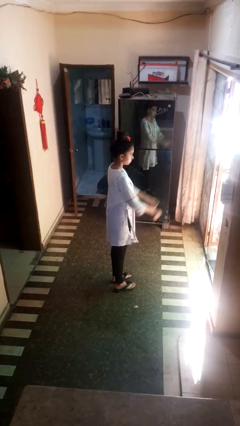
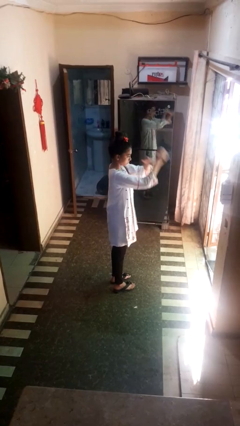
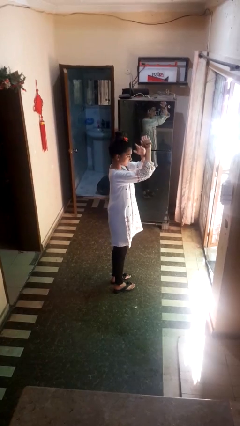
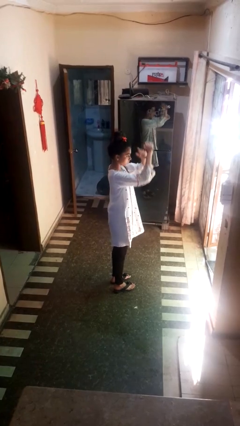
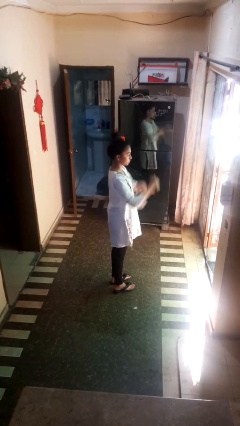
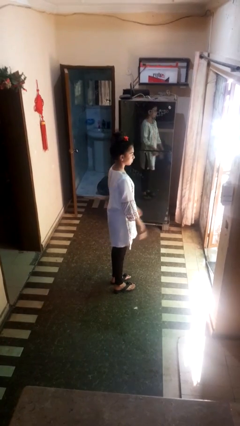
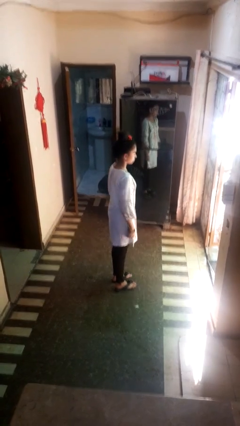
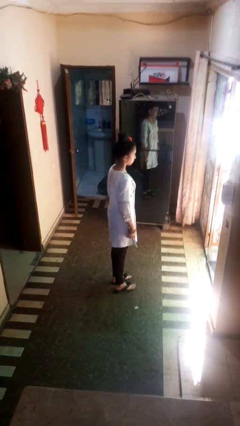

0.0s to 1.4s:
person gestures arms x

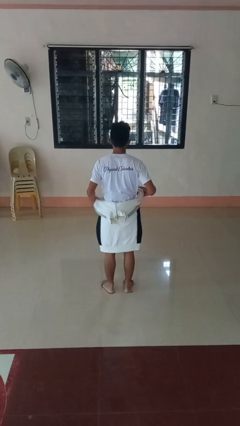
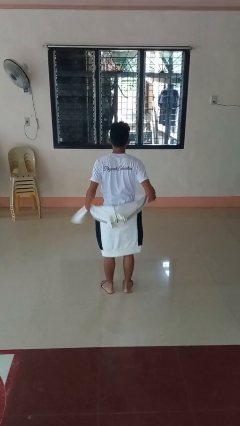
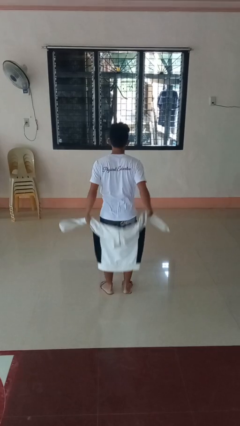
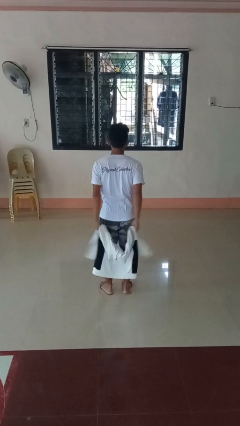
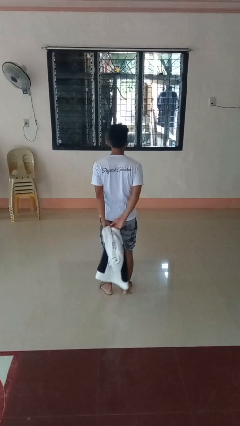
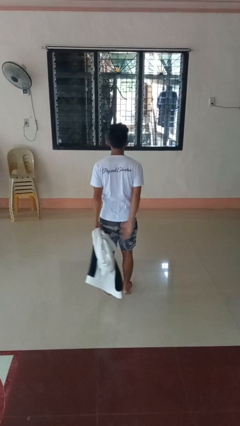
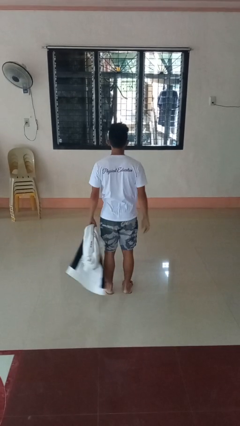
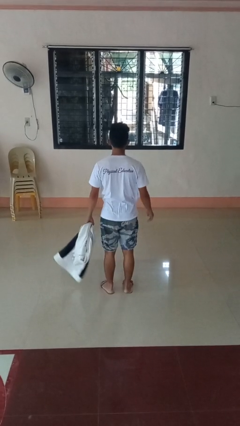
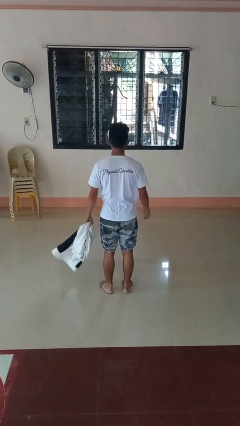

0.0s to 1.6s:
person unties jacket around waist

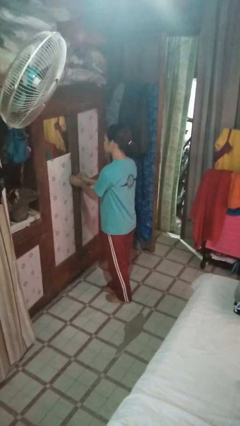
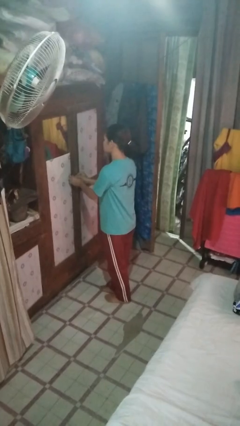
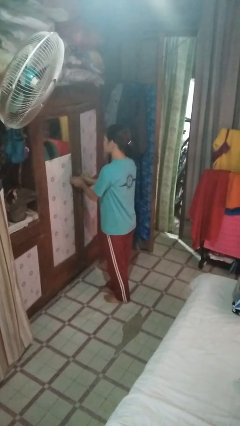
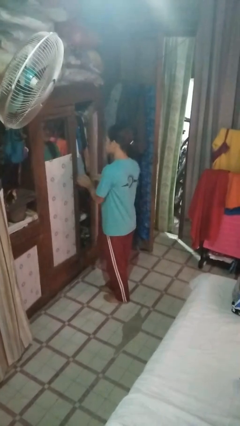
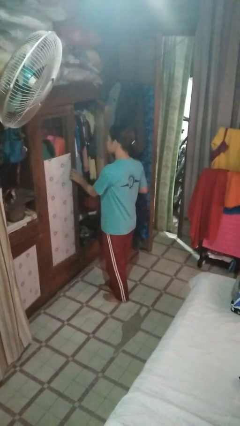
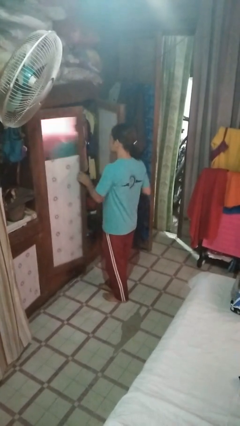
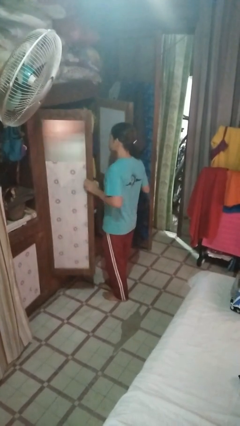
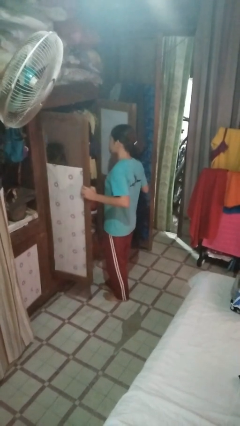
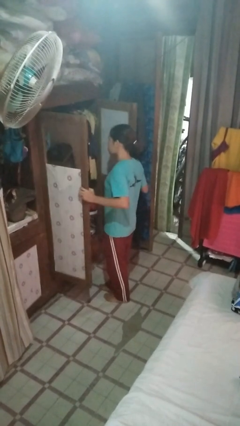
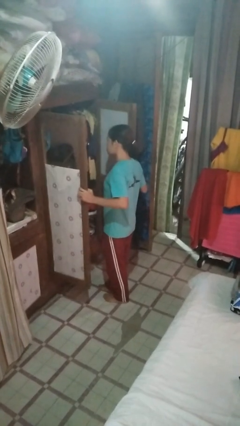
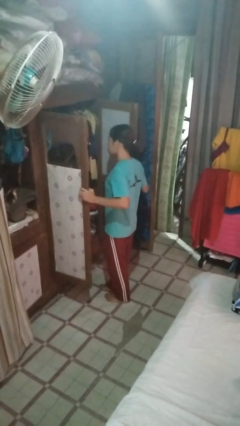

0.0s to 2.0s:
person opens closet door

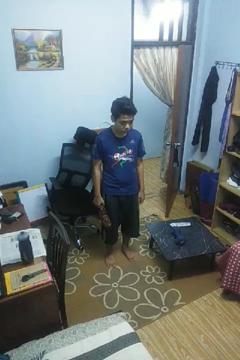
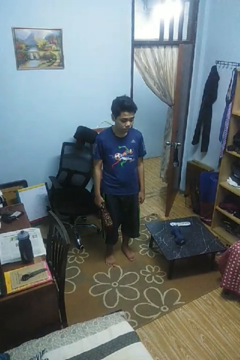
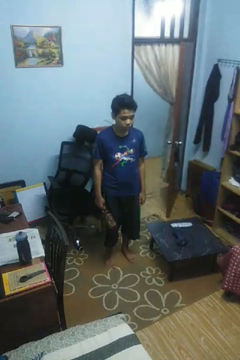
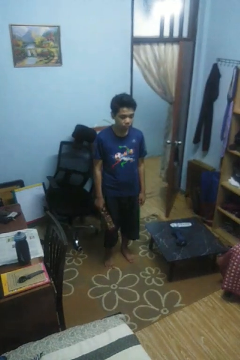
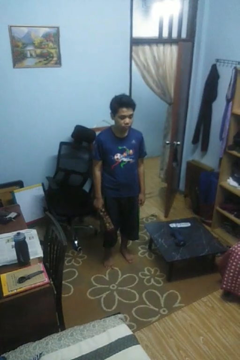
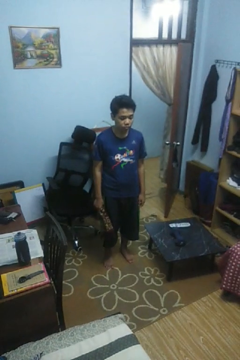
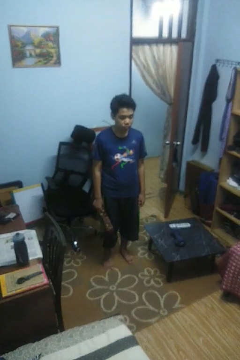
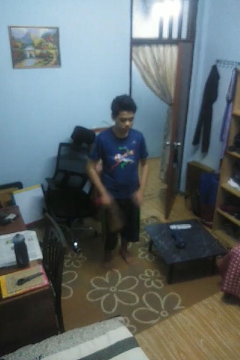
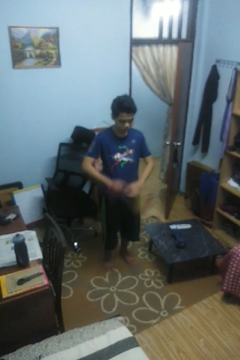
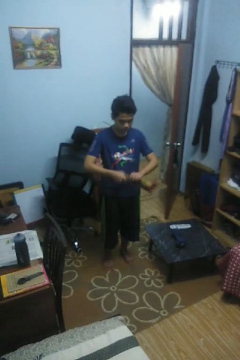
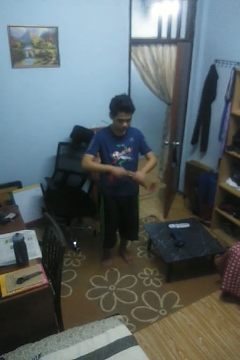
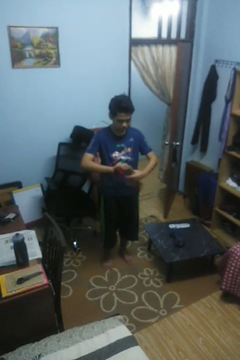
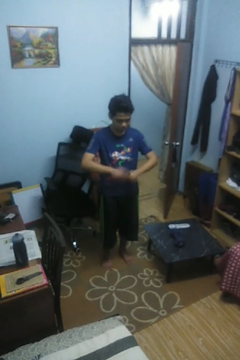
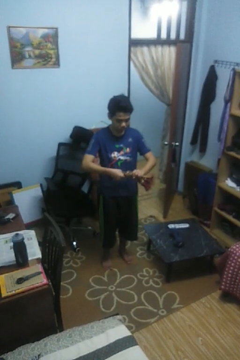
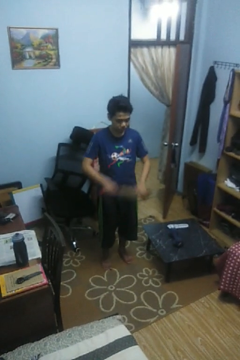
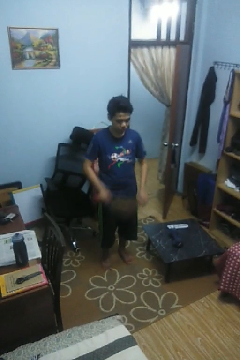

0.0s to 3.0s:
person squeezes object

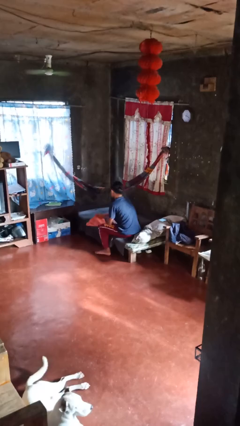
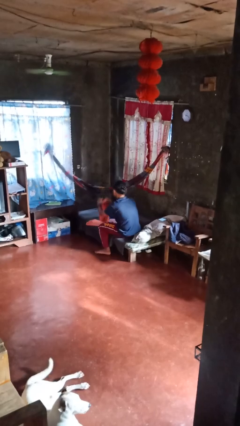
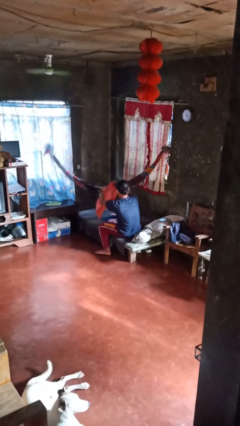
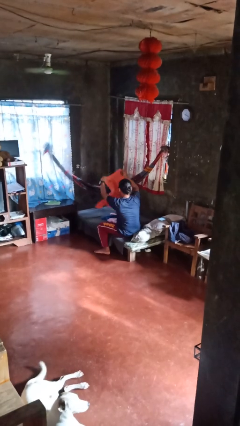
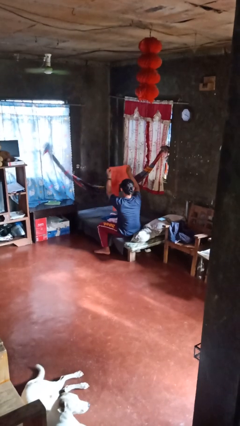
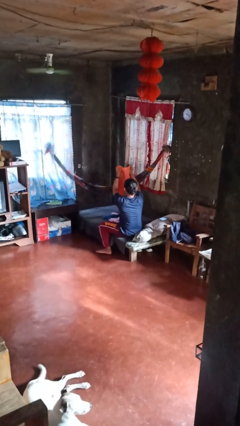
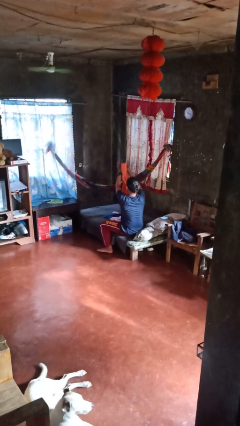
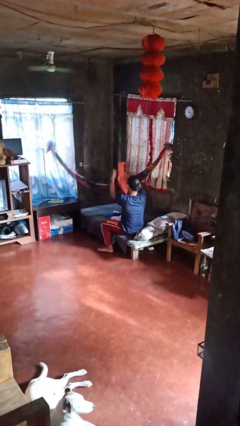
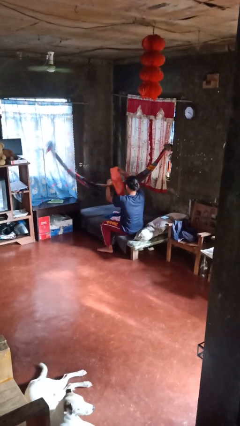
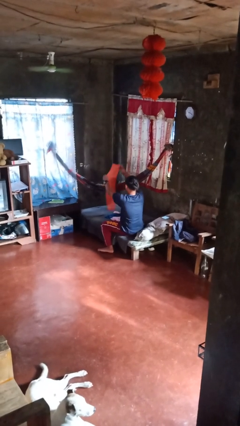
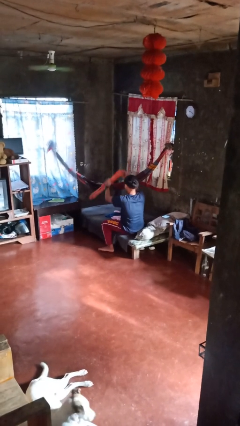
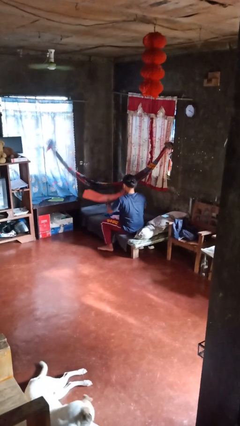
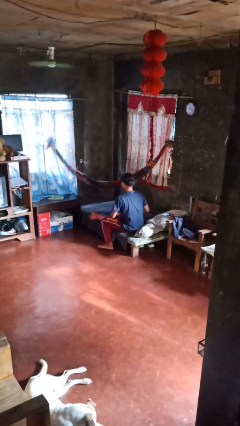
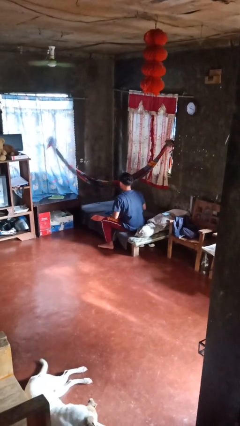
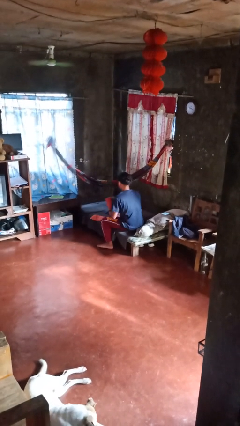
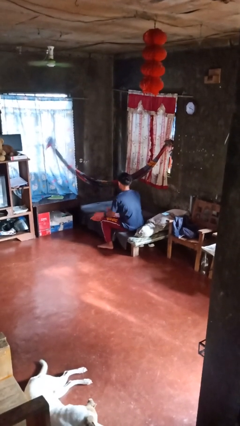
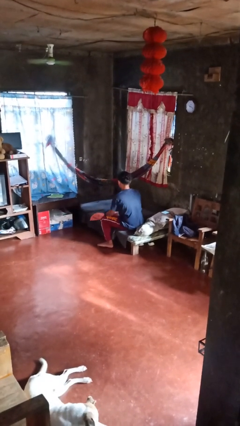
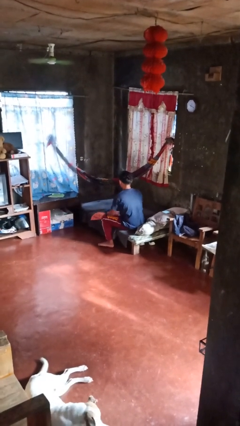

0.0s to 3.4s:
person folds pants

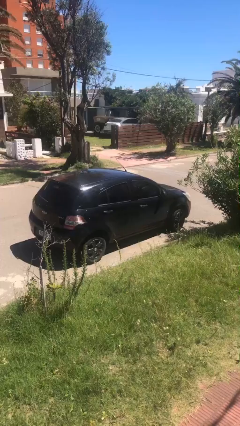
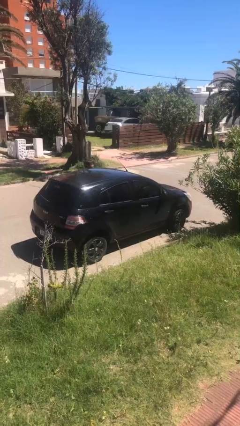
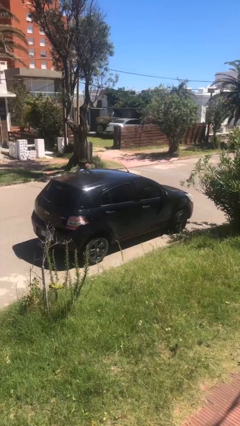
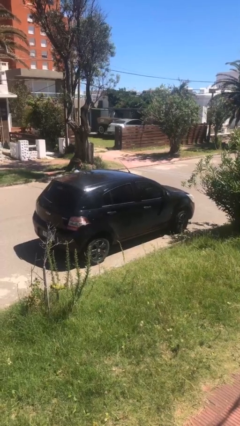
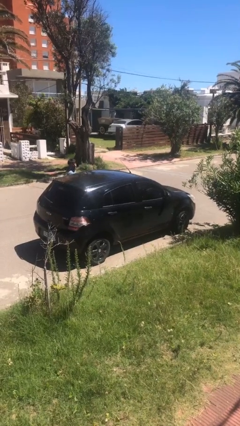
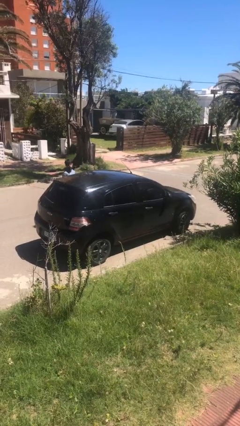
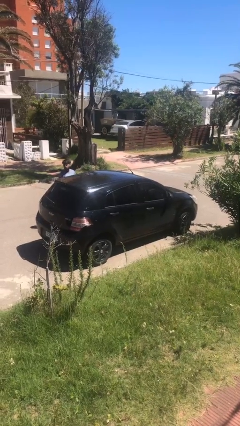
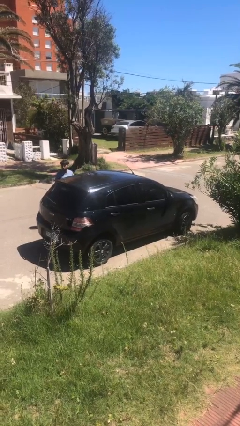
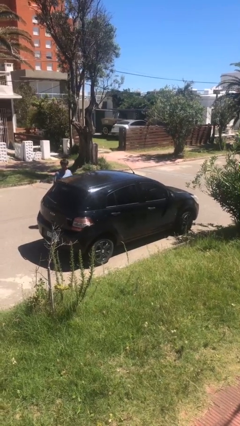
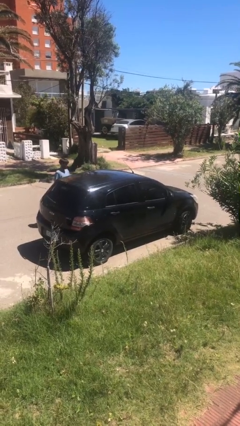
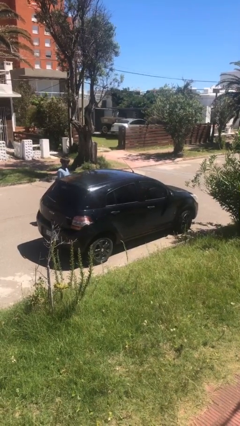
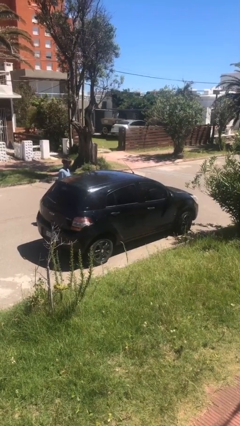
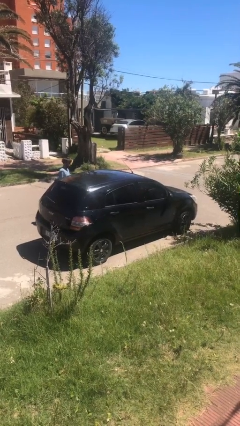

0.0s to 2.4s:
car drops off person

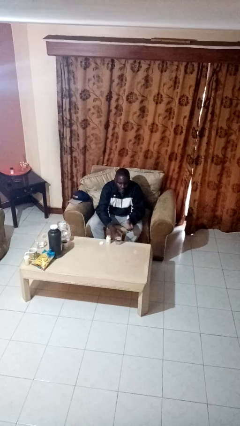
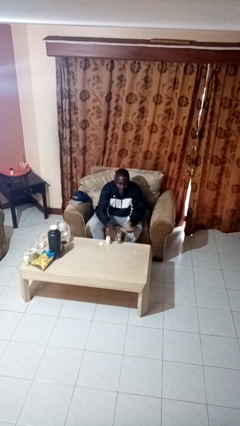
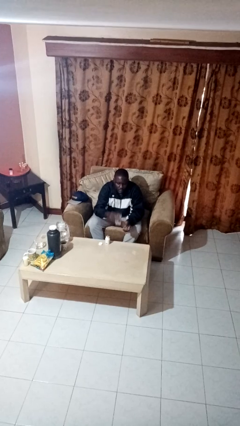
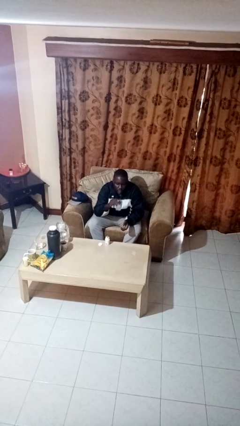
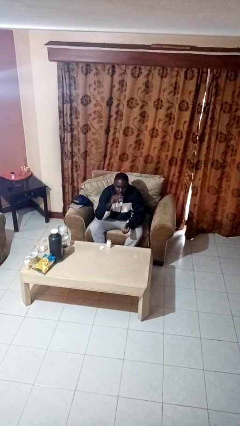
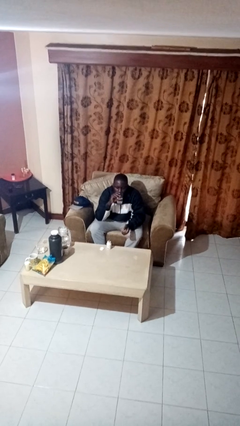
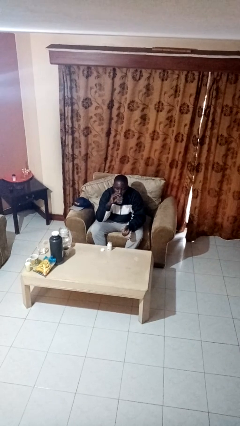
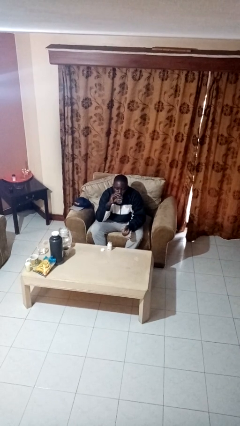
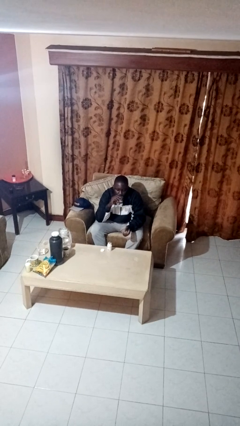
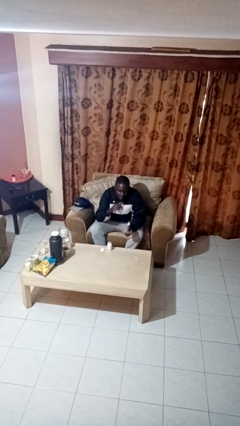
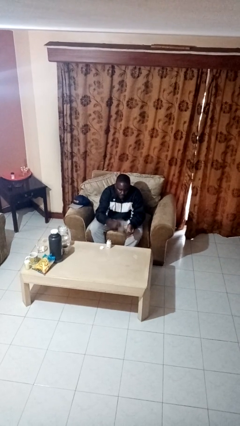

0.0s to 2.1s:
person drinks from cup

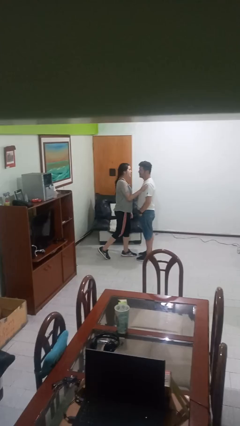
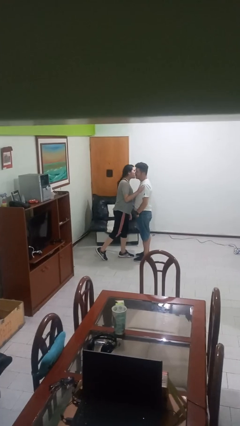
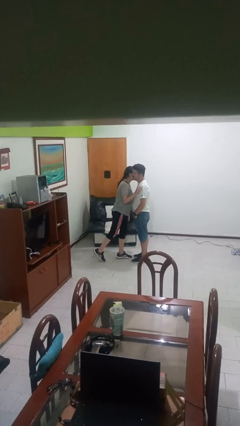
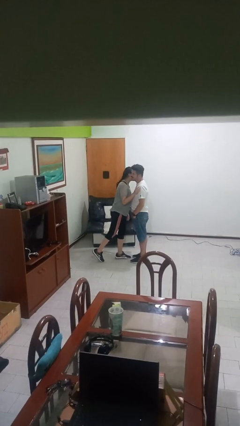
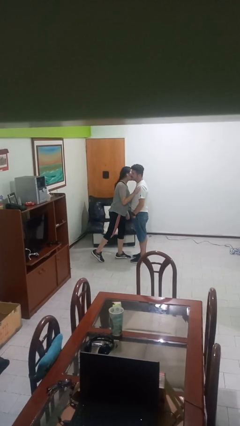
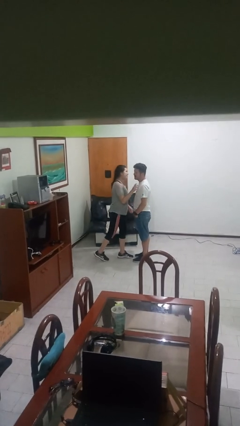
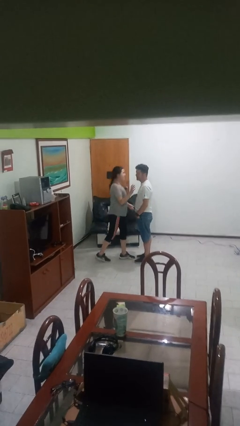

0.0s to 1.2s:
person kisses cheek of person

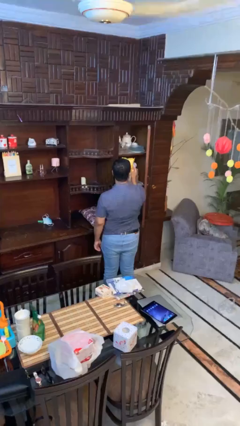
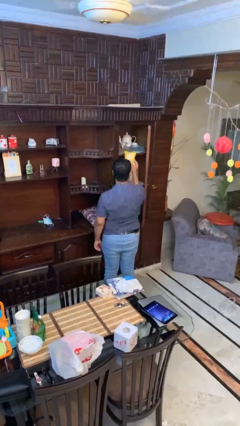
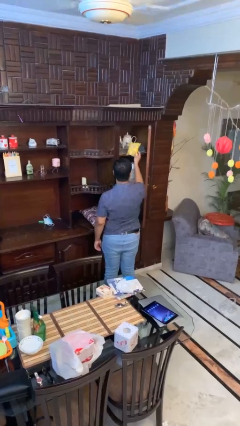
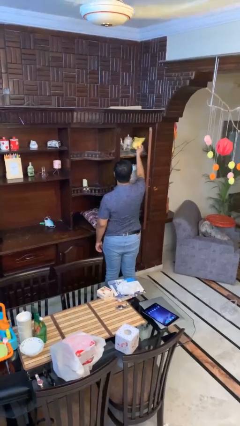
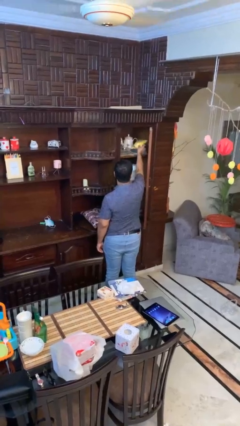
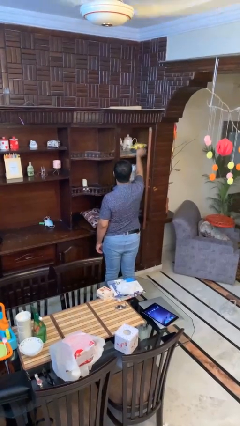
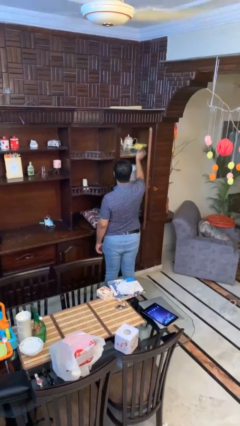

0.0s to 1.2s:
person puts down object into cabinet
